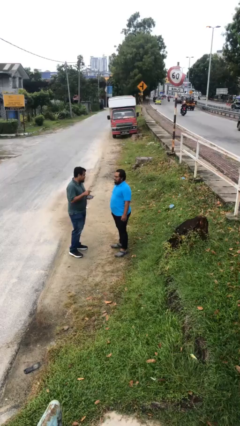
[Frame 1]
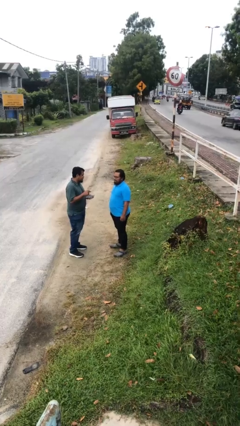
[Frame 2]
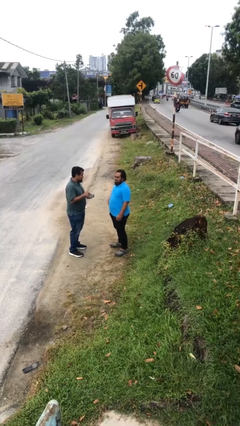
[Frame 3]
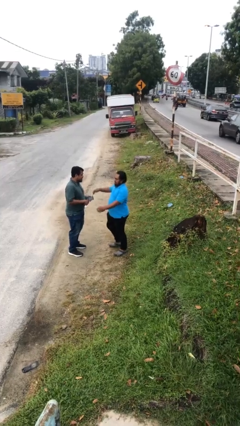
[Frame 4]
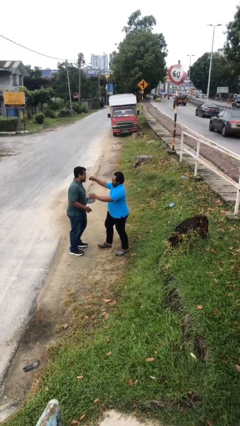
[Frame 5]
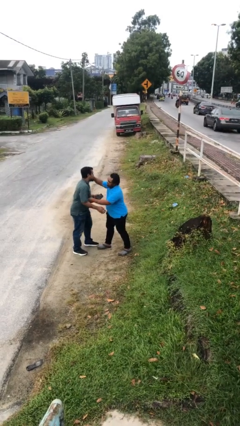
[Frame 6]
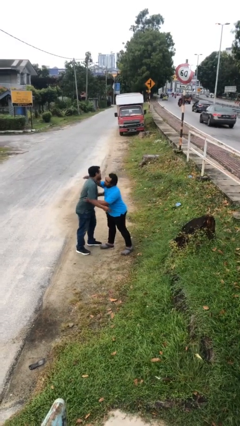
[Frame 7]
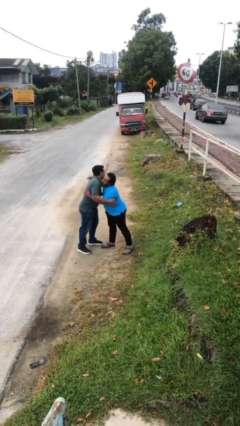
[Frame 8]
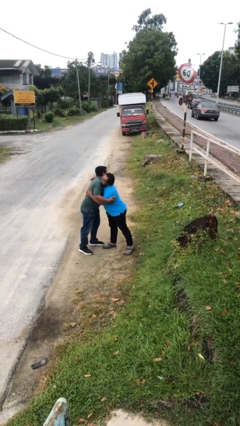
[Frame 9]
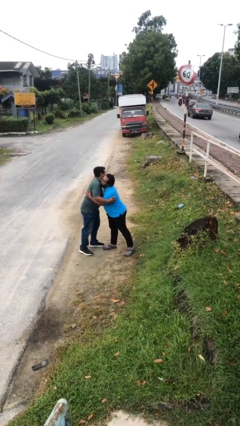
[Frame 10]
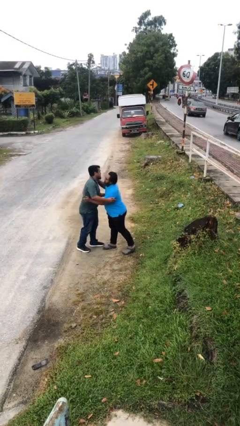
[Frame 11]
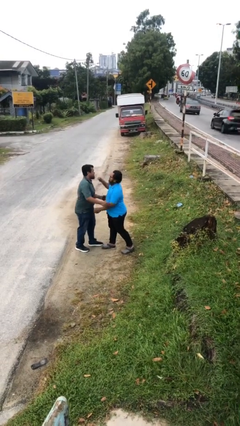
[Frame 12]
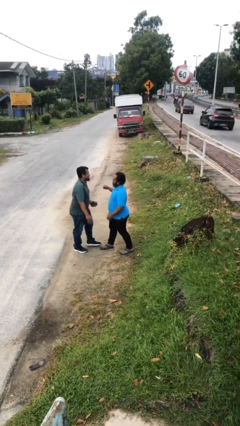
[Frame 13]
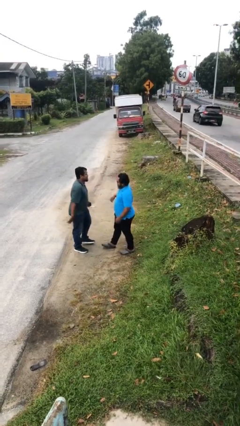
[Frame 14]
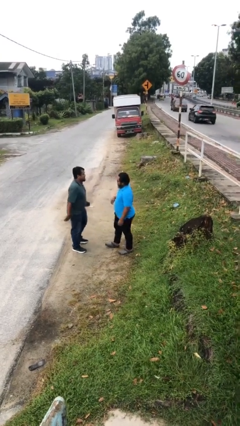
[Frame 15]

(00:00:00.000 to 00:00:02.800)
person embraces person

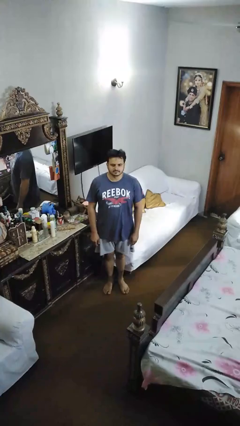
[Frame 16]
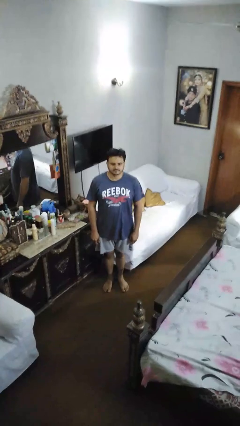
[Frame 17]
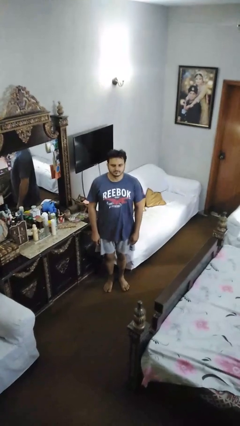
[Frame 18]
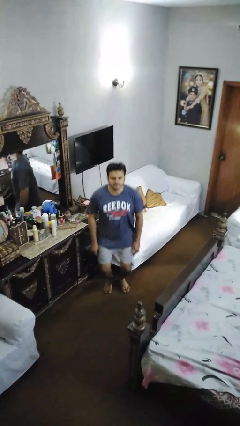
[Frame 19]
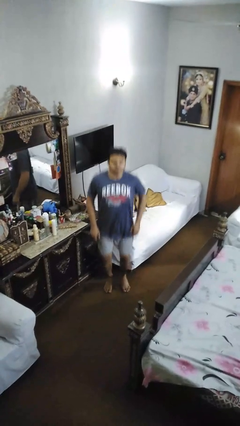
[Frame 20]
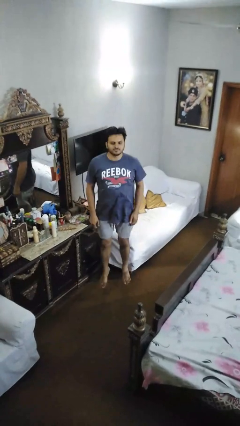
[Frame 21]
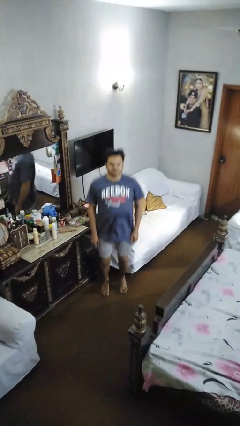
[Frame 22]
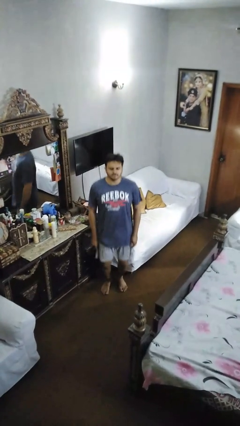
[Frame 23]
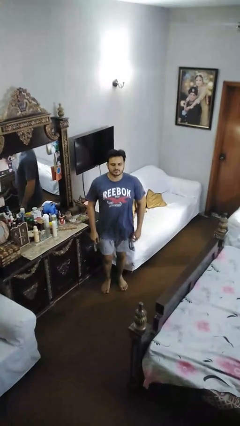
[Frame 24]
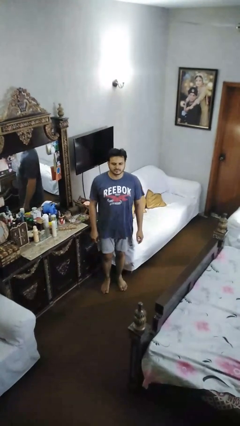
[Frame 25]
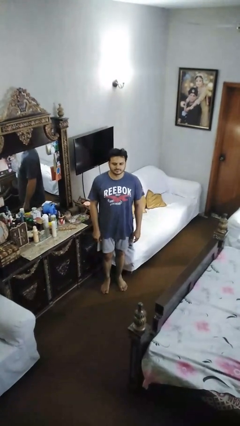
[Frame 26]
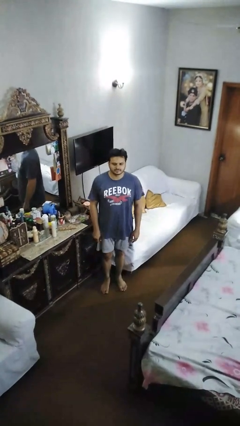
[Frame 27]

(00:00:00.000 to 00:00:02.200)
person jumps

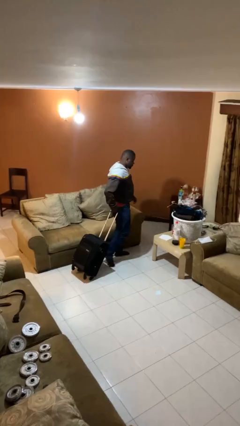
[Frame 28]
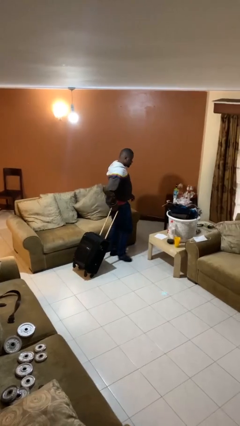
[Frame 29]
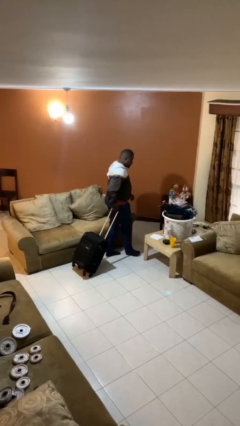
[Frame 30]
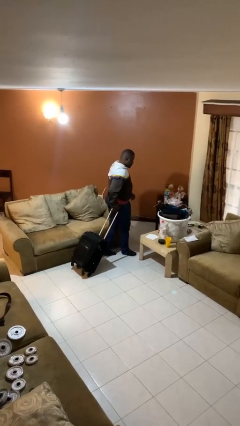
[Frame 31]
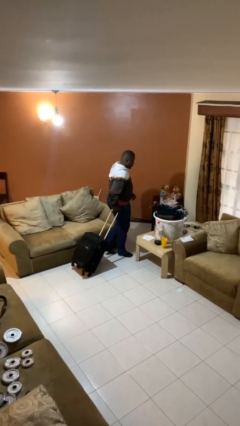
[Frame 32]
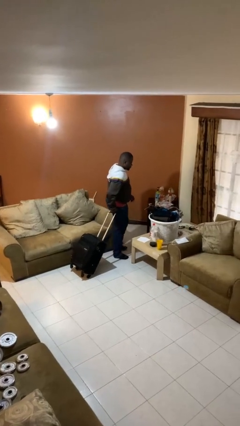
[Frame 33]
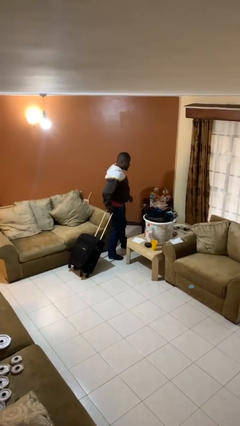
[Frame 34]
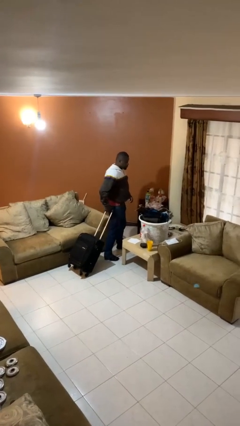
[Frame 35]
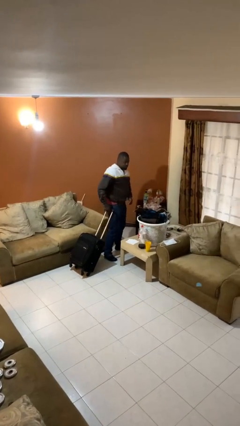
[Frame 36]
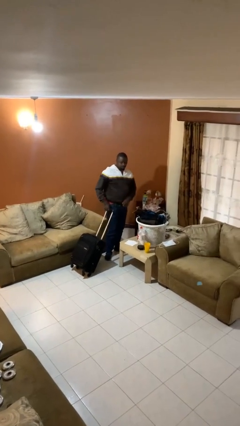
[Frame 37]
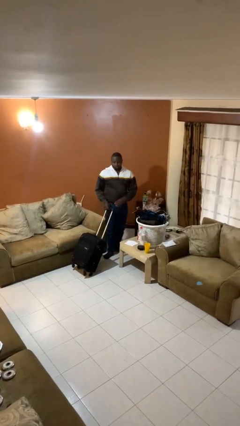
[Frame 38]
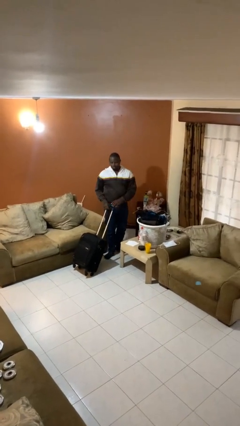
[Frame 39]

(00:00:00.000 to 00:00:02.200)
person pulls wheeled cart

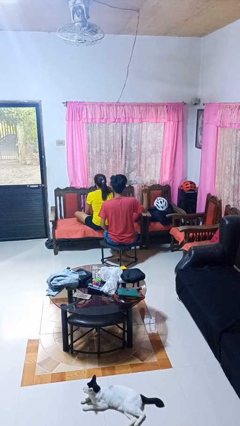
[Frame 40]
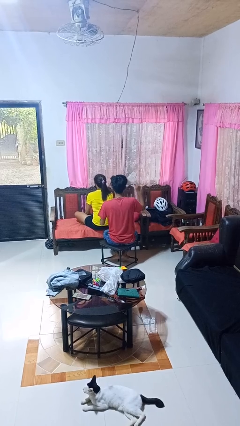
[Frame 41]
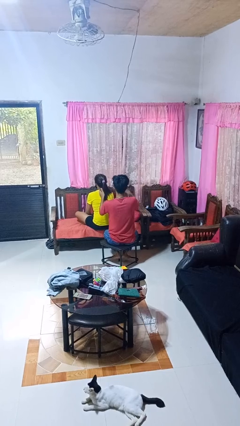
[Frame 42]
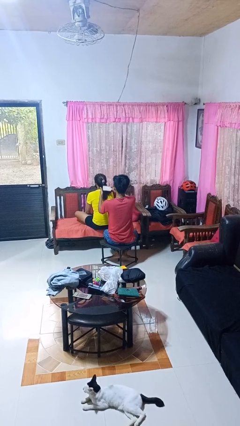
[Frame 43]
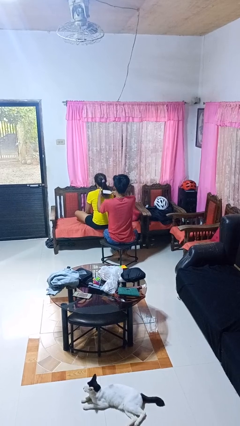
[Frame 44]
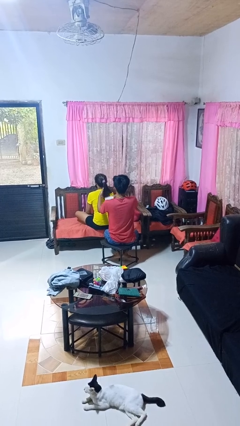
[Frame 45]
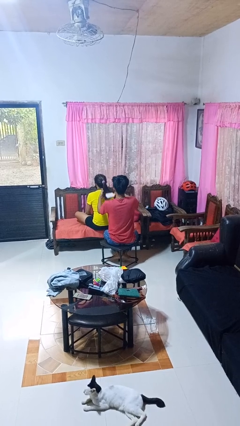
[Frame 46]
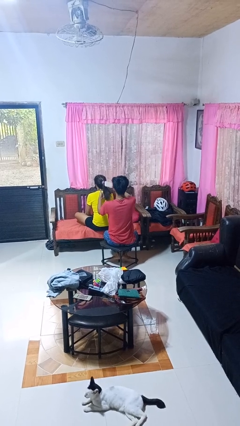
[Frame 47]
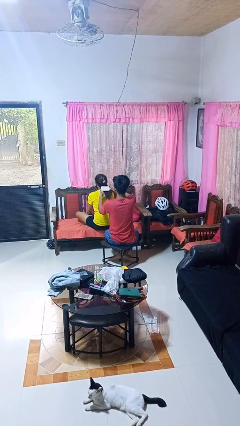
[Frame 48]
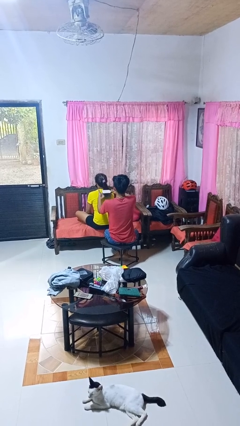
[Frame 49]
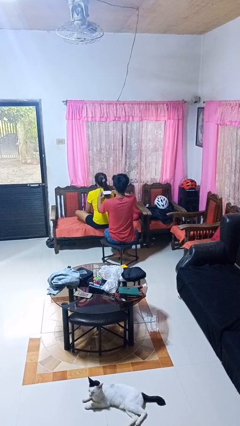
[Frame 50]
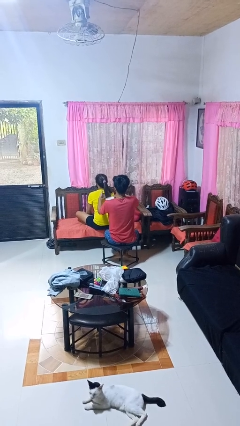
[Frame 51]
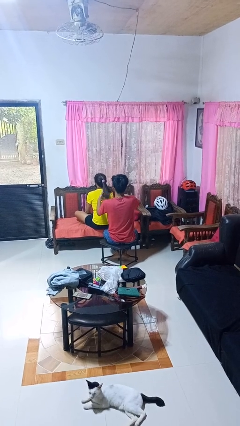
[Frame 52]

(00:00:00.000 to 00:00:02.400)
person brushes hair of person

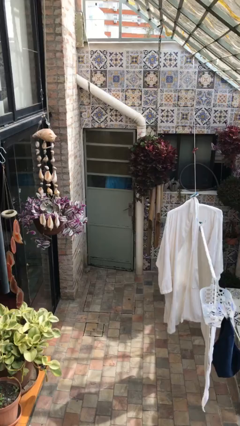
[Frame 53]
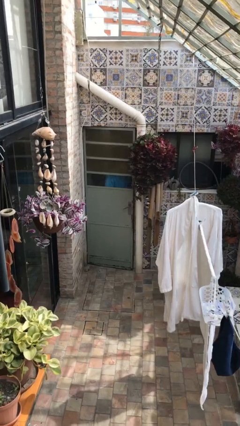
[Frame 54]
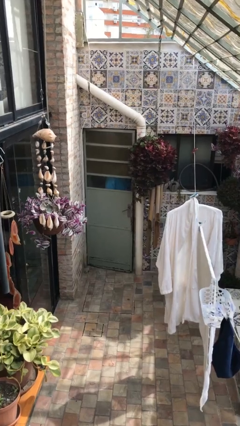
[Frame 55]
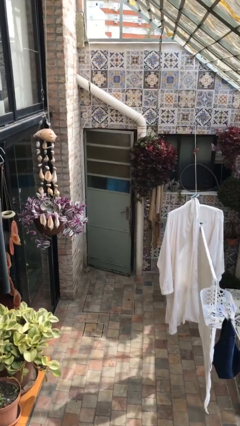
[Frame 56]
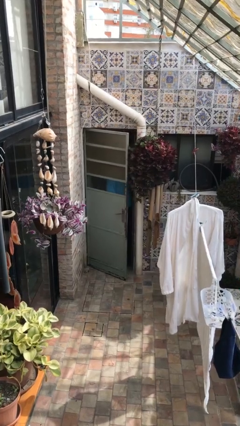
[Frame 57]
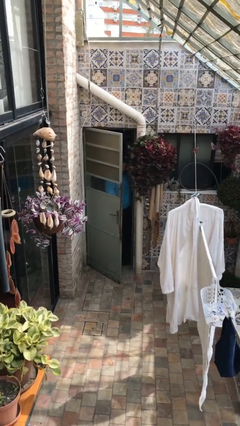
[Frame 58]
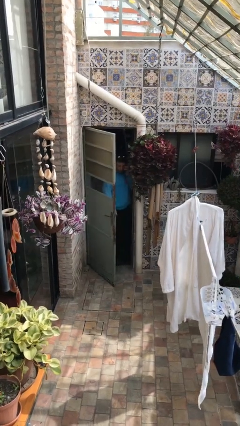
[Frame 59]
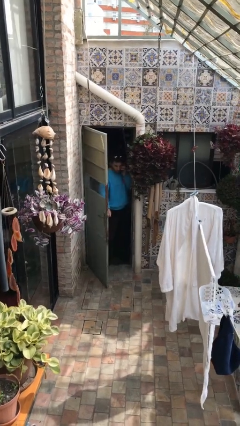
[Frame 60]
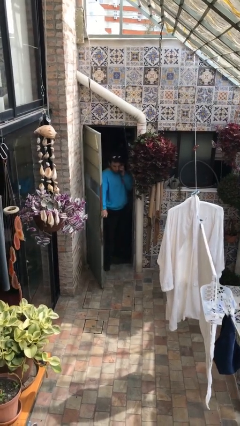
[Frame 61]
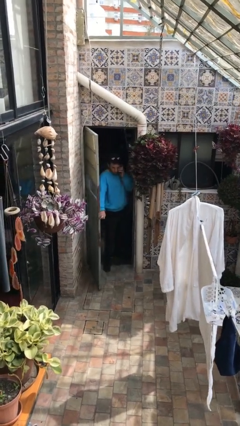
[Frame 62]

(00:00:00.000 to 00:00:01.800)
person opens facility door

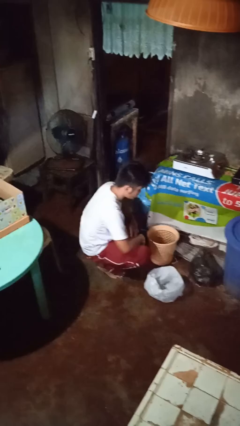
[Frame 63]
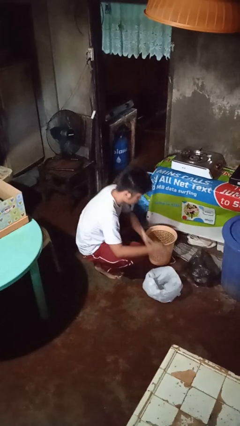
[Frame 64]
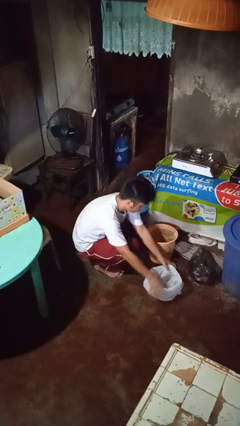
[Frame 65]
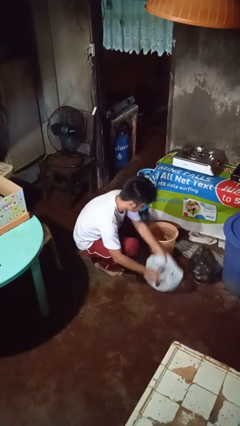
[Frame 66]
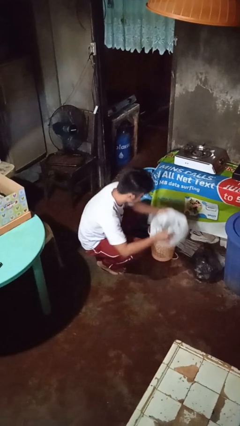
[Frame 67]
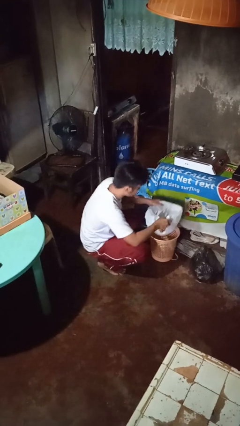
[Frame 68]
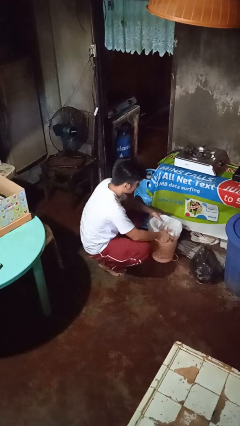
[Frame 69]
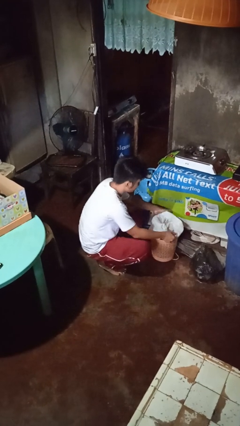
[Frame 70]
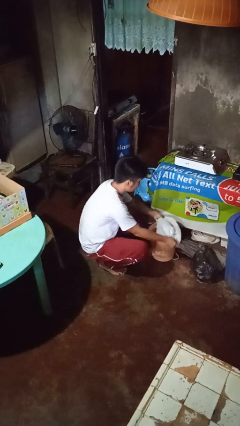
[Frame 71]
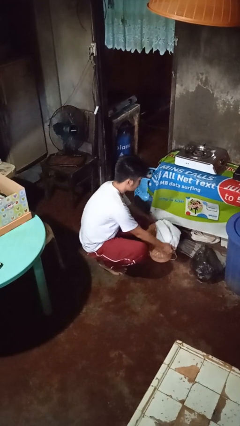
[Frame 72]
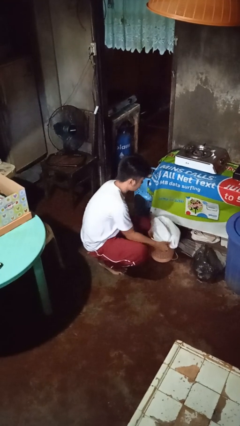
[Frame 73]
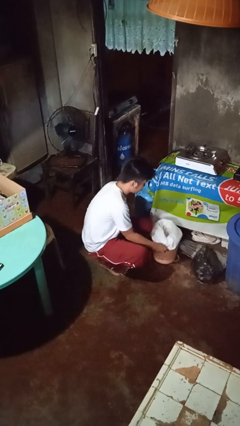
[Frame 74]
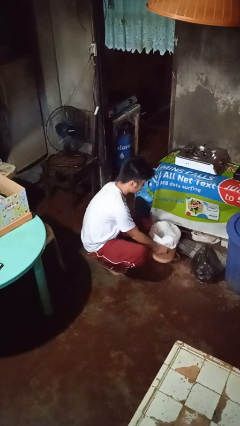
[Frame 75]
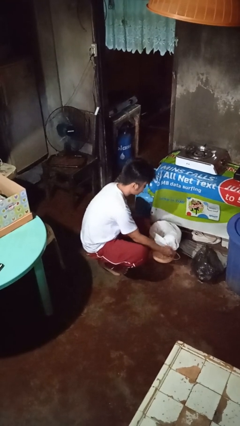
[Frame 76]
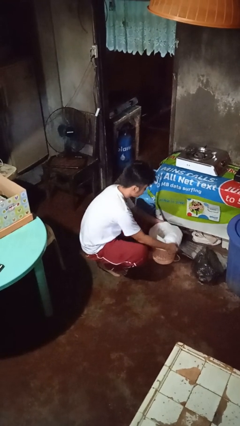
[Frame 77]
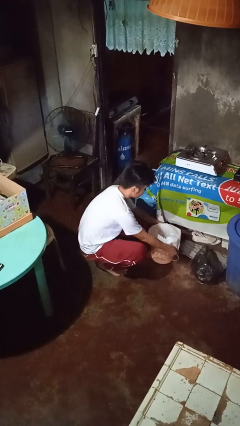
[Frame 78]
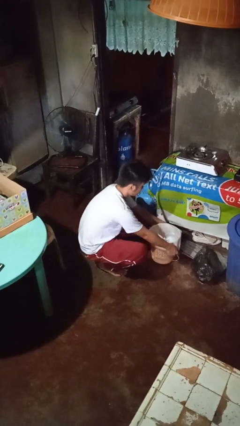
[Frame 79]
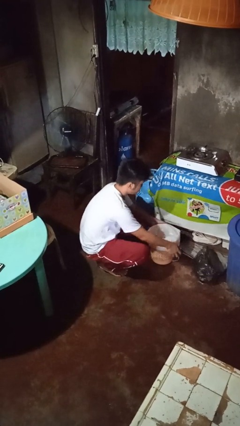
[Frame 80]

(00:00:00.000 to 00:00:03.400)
person inserts trashbag into trashcan

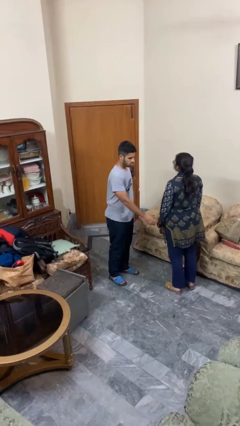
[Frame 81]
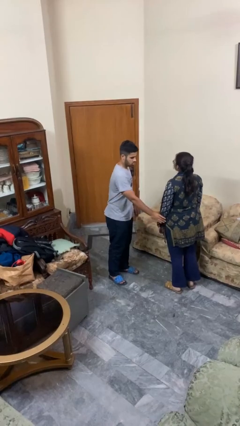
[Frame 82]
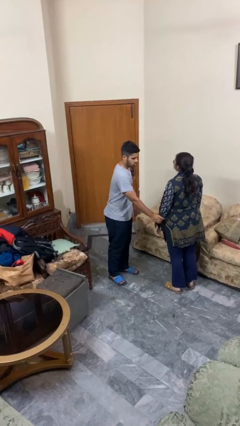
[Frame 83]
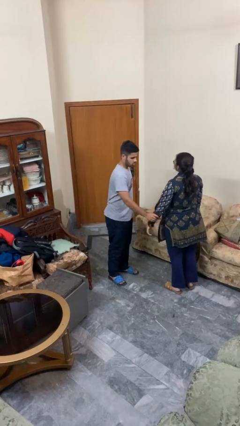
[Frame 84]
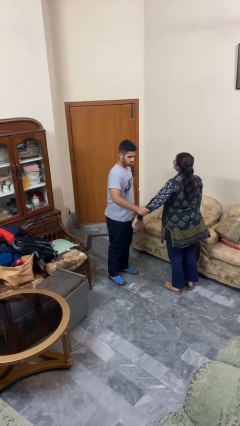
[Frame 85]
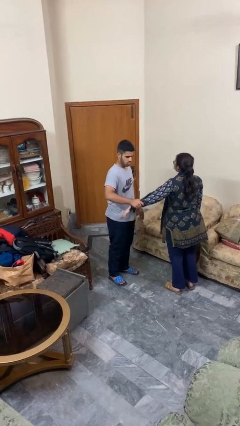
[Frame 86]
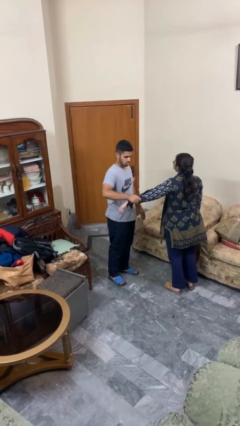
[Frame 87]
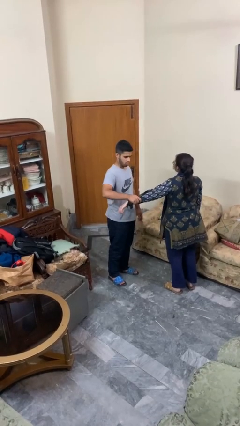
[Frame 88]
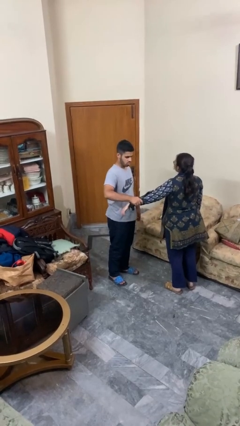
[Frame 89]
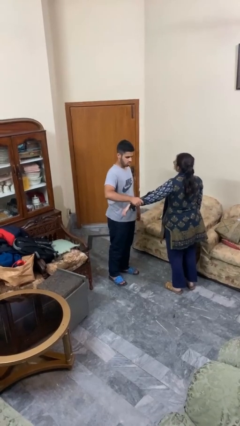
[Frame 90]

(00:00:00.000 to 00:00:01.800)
person grabs person by forearm

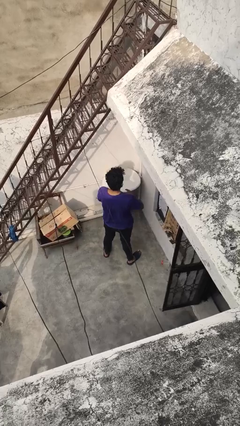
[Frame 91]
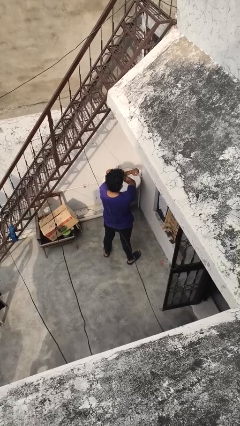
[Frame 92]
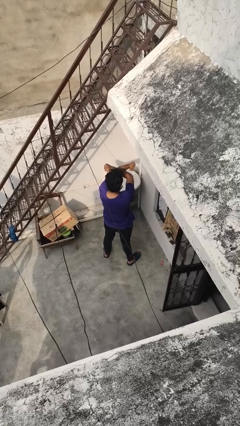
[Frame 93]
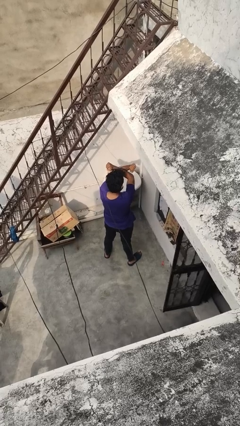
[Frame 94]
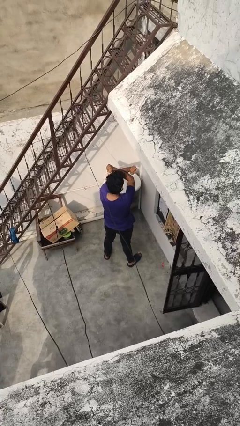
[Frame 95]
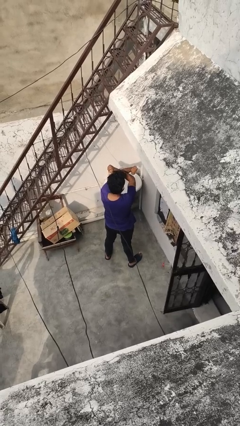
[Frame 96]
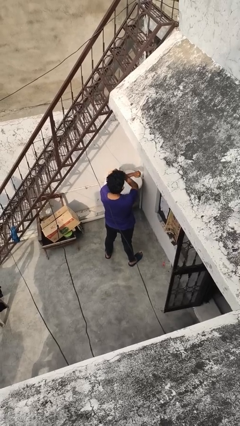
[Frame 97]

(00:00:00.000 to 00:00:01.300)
person gestures arms x
